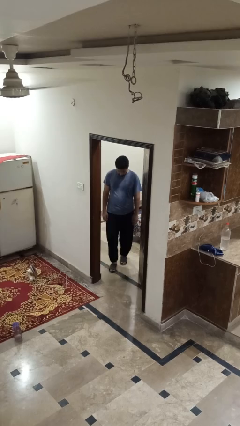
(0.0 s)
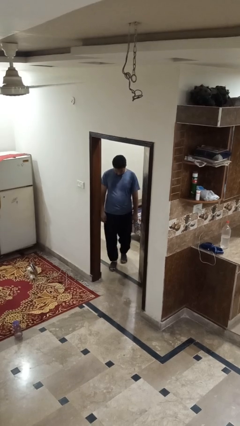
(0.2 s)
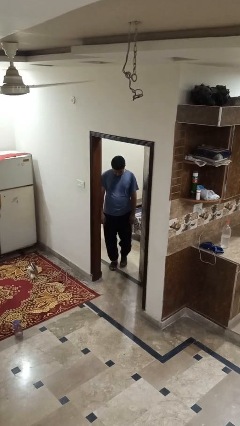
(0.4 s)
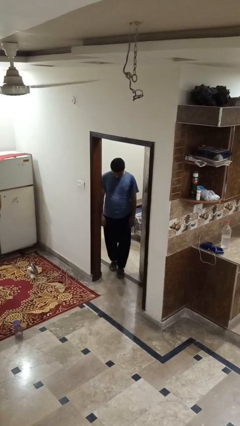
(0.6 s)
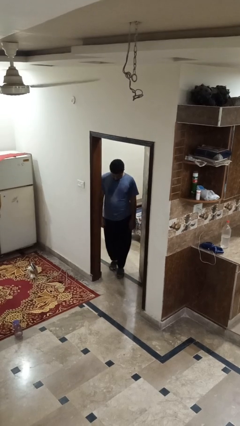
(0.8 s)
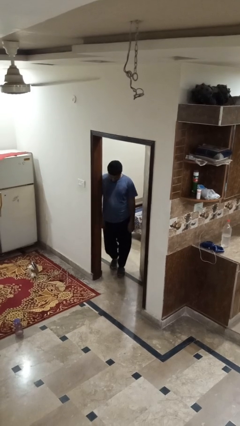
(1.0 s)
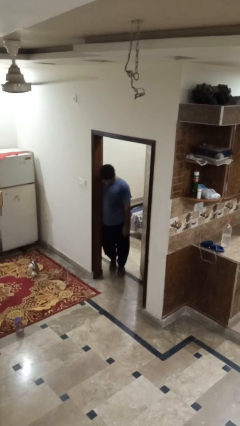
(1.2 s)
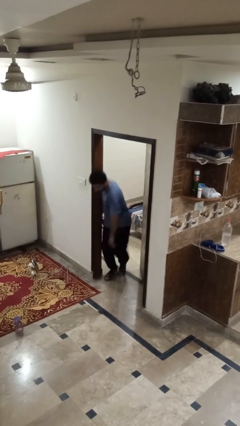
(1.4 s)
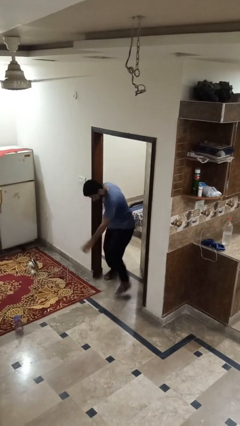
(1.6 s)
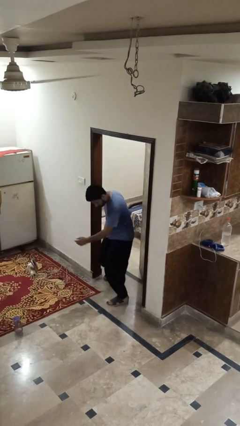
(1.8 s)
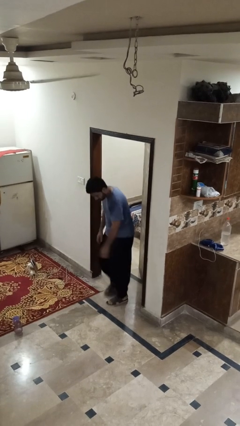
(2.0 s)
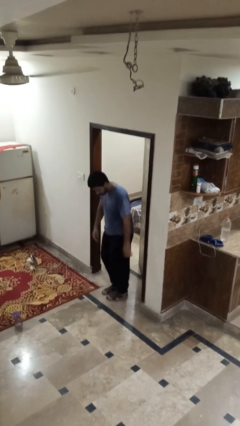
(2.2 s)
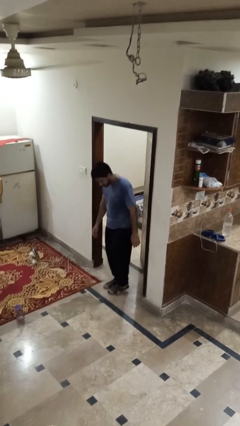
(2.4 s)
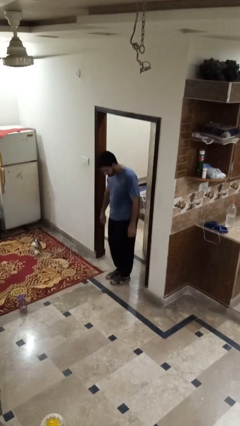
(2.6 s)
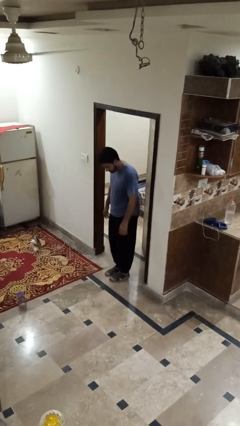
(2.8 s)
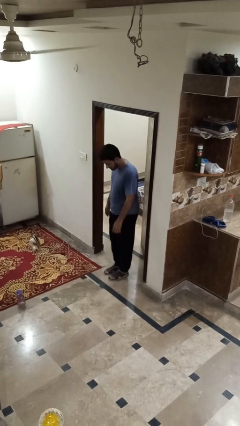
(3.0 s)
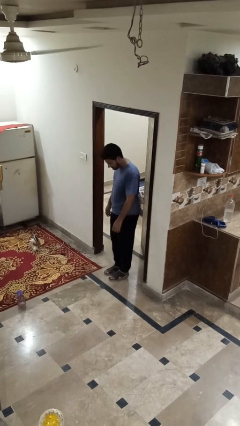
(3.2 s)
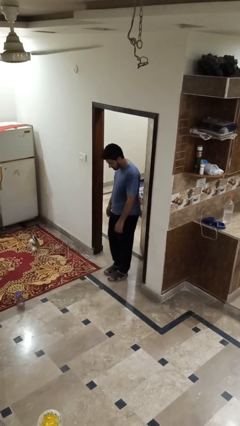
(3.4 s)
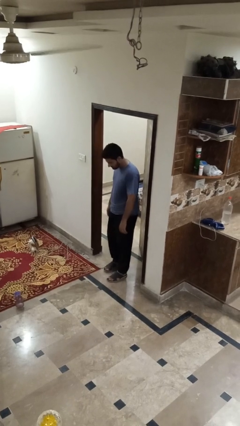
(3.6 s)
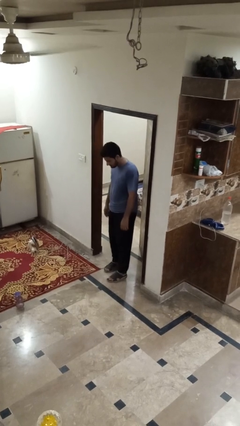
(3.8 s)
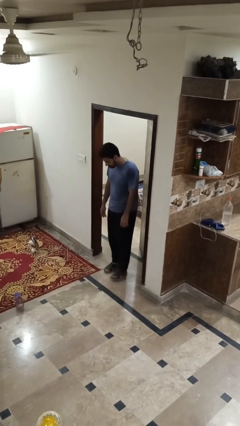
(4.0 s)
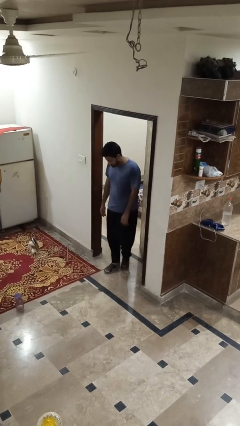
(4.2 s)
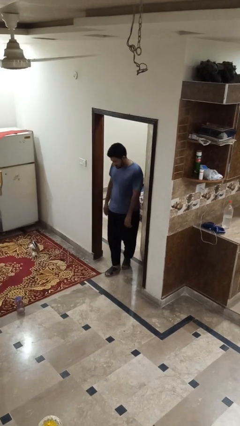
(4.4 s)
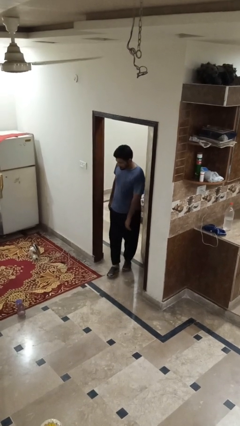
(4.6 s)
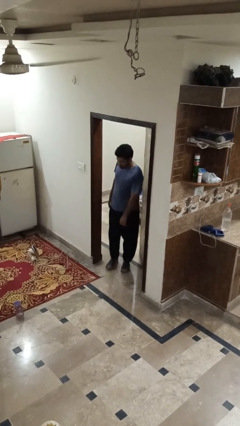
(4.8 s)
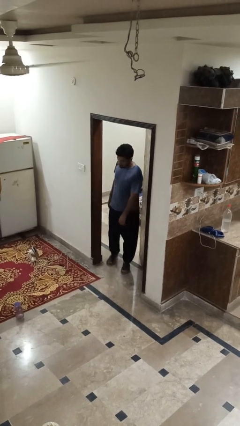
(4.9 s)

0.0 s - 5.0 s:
person bumps into wall

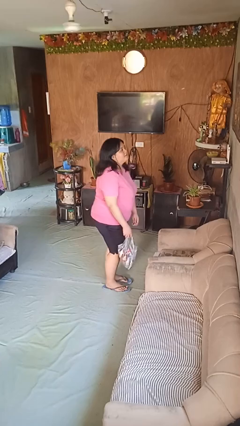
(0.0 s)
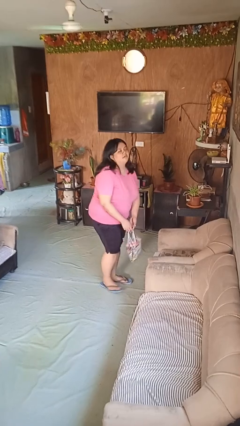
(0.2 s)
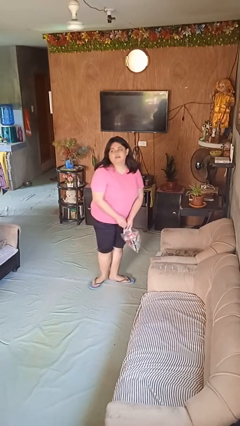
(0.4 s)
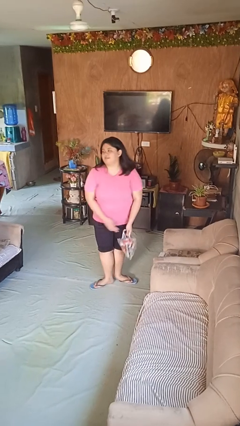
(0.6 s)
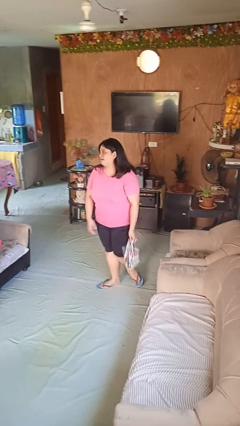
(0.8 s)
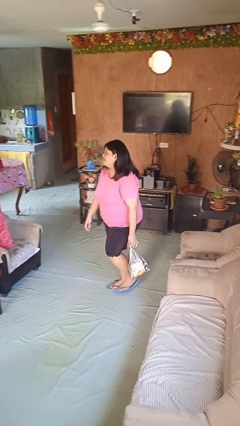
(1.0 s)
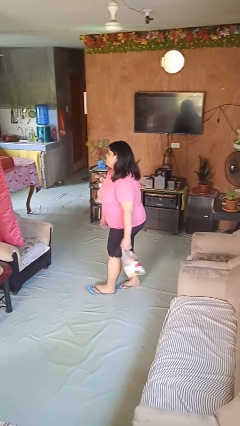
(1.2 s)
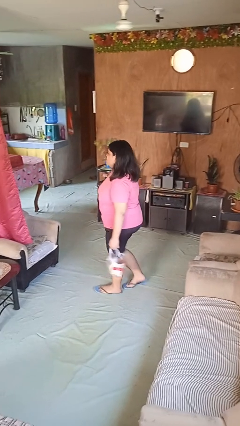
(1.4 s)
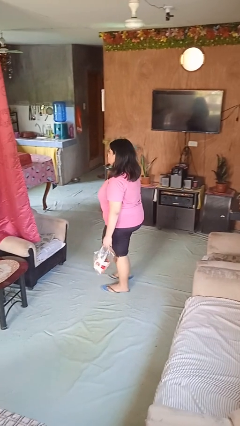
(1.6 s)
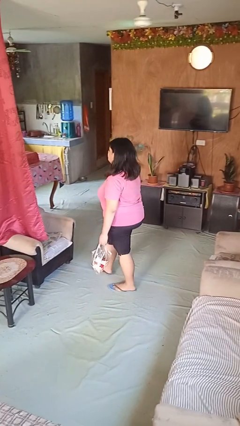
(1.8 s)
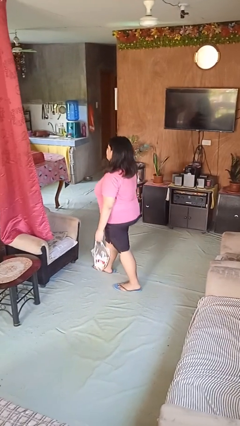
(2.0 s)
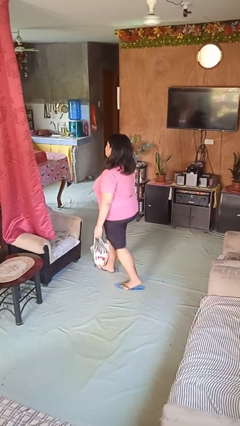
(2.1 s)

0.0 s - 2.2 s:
person carries groceries

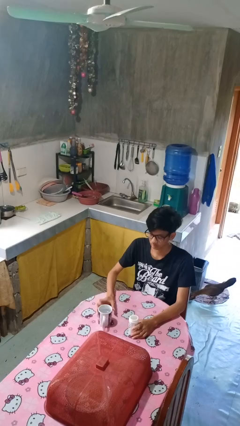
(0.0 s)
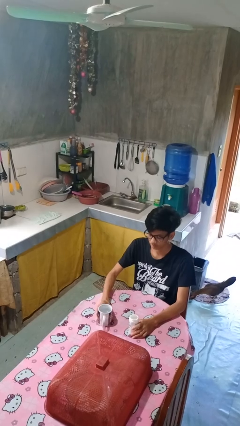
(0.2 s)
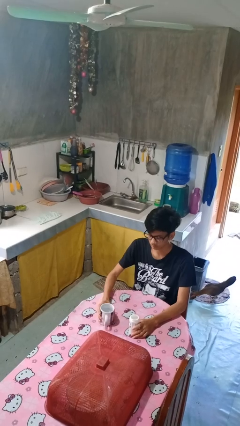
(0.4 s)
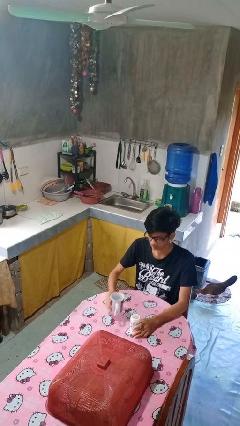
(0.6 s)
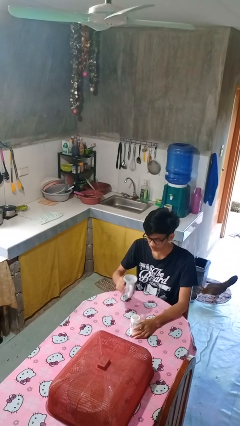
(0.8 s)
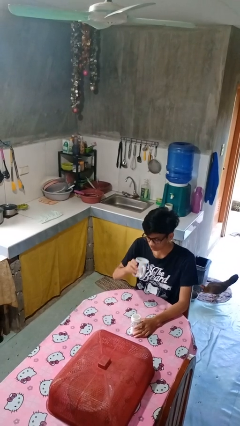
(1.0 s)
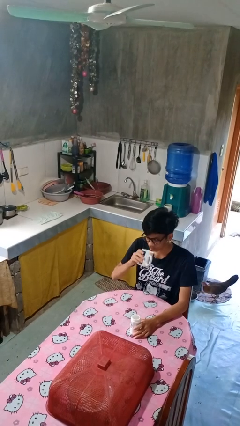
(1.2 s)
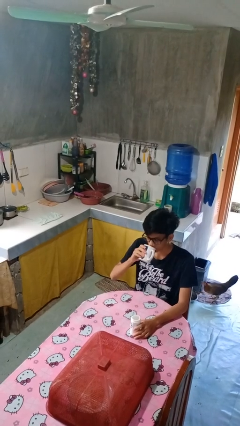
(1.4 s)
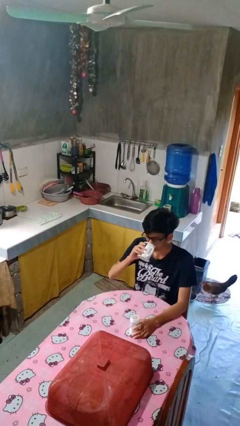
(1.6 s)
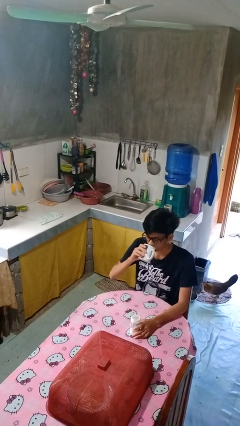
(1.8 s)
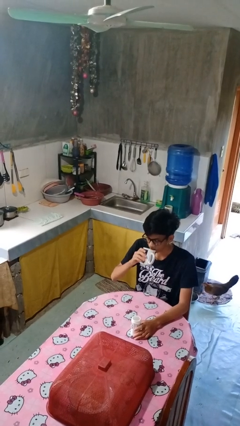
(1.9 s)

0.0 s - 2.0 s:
person drinks from cup

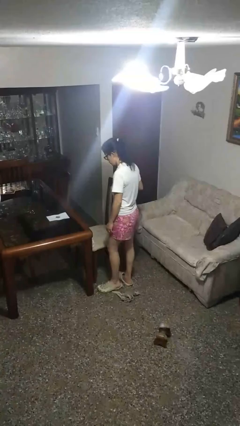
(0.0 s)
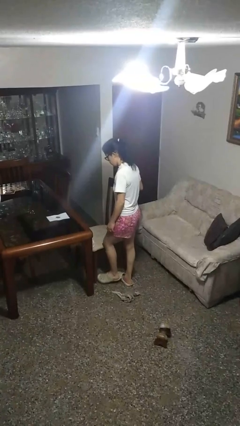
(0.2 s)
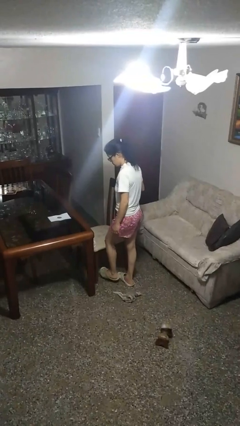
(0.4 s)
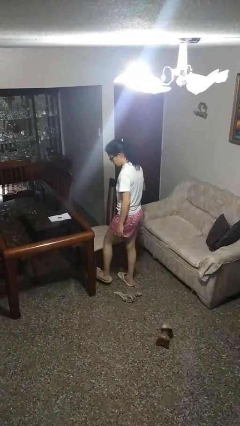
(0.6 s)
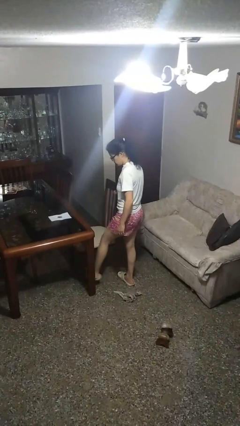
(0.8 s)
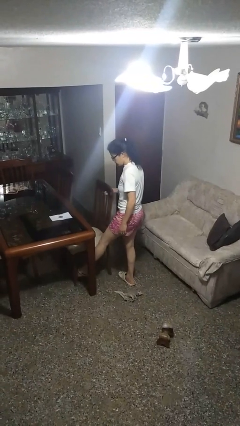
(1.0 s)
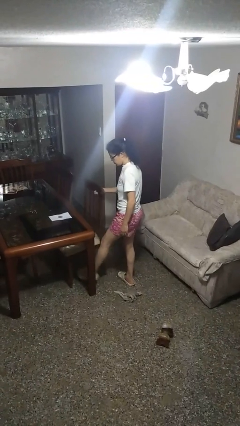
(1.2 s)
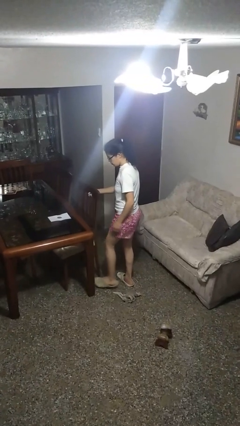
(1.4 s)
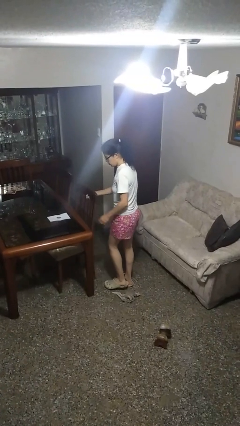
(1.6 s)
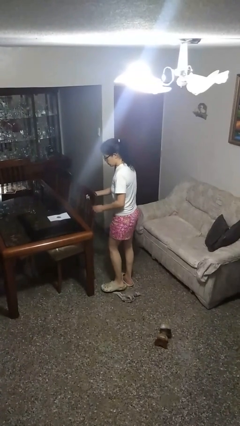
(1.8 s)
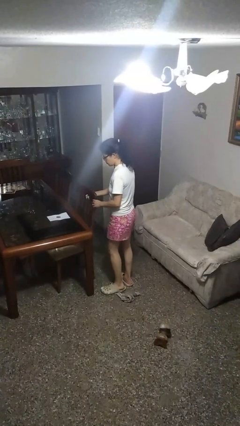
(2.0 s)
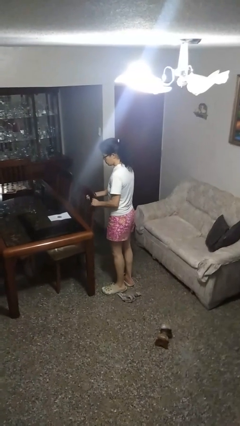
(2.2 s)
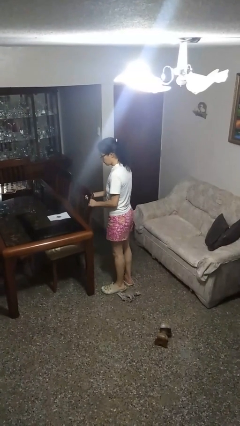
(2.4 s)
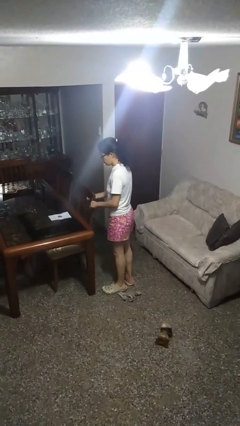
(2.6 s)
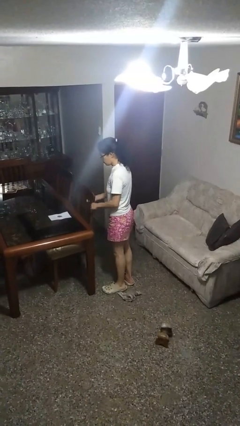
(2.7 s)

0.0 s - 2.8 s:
person pushes in chair

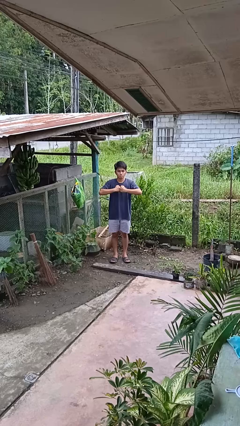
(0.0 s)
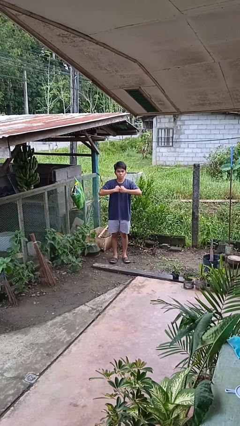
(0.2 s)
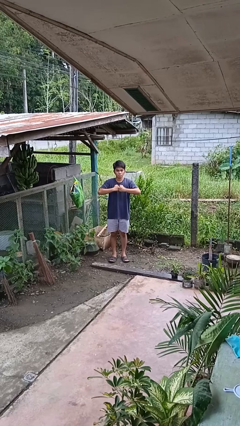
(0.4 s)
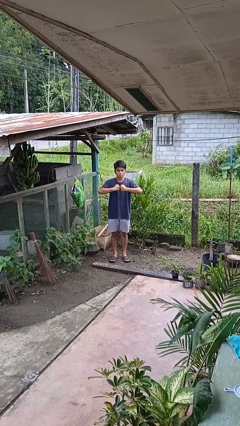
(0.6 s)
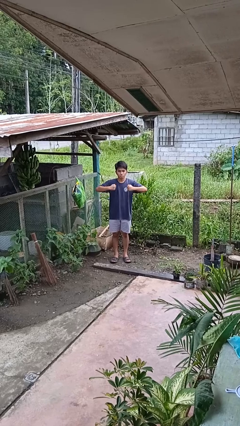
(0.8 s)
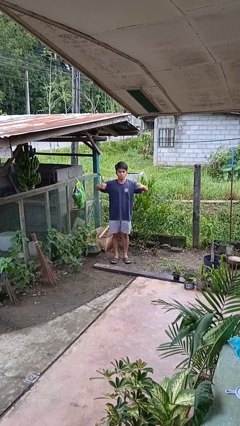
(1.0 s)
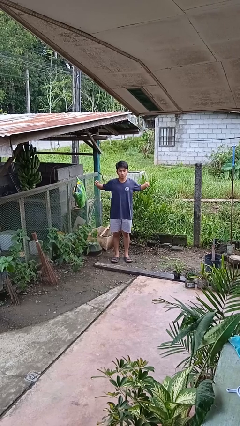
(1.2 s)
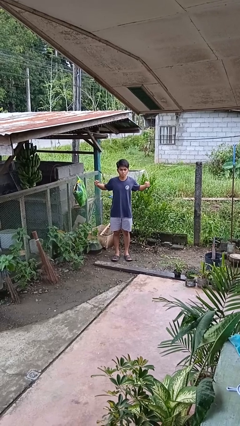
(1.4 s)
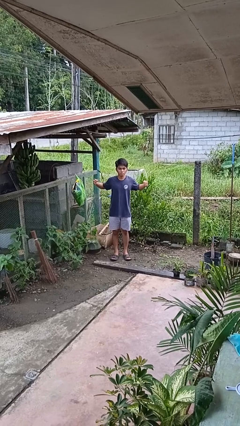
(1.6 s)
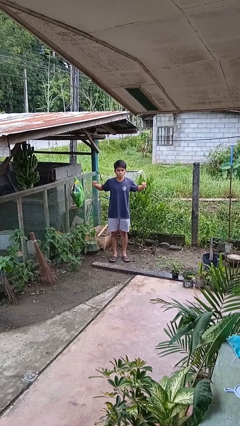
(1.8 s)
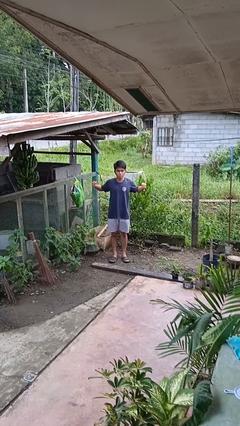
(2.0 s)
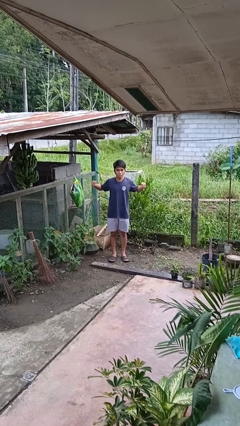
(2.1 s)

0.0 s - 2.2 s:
person gestures zoom in

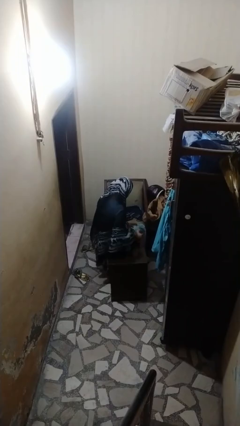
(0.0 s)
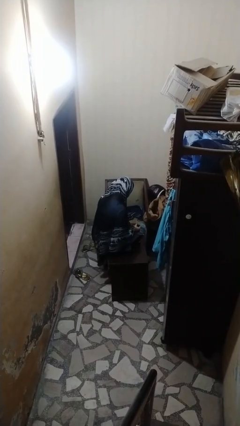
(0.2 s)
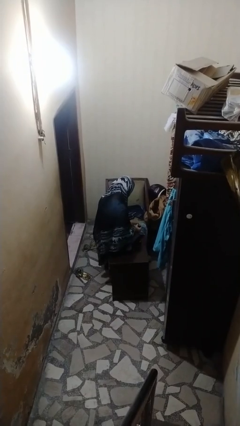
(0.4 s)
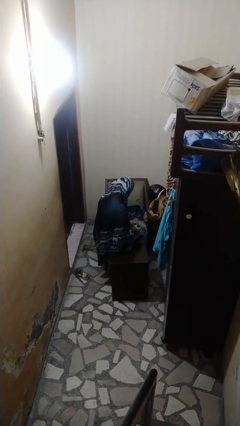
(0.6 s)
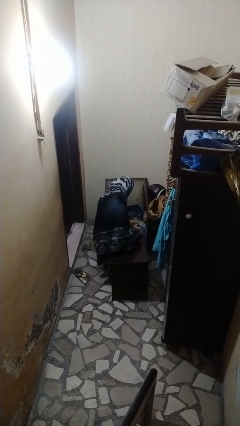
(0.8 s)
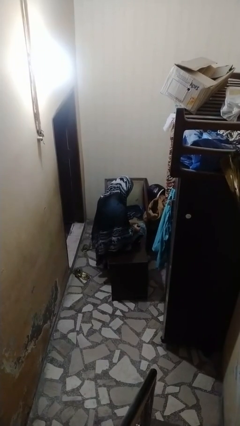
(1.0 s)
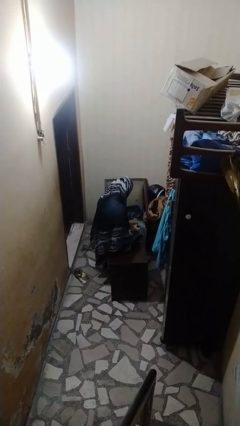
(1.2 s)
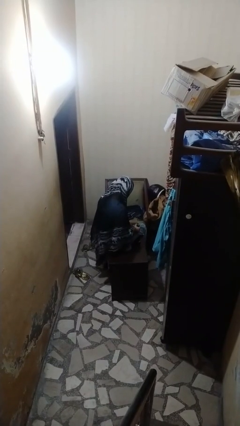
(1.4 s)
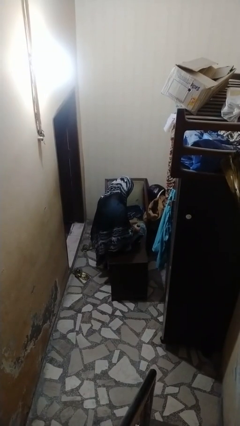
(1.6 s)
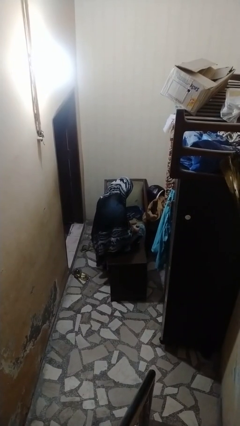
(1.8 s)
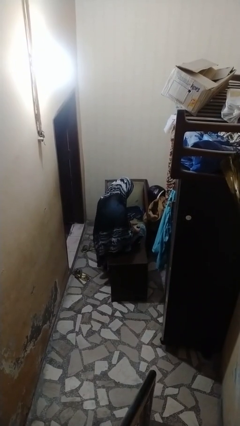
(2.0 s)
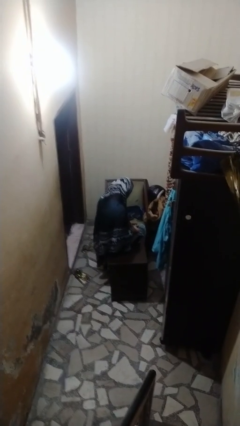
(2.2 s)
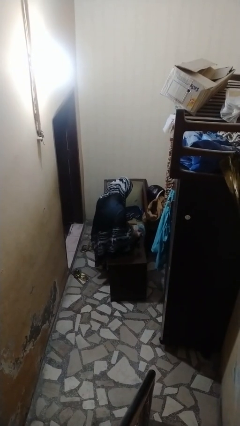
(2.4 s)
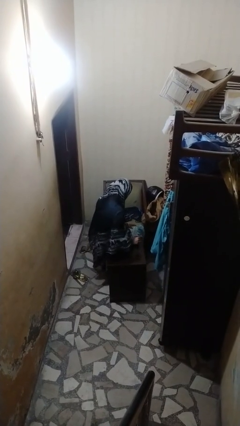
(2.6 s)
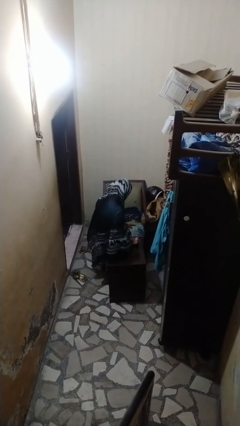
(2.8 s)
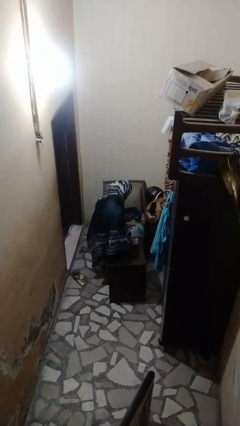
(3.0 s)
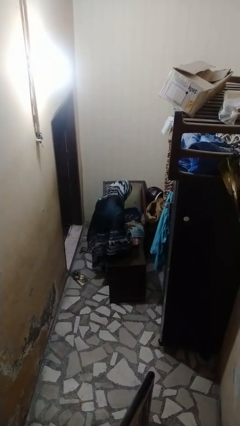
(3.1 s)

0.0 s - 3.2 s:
person paints fingernails
